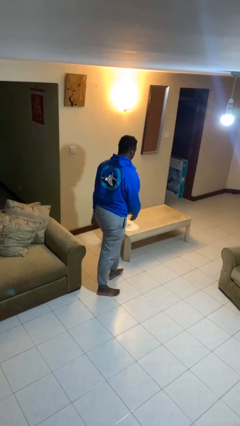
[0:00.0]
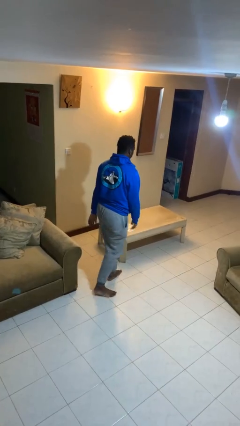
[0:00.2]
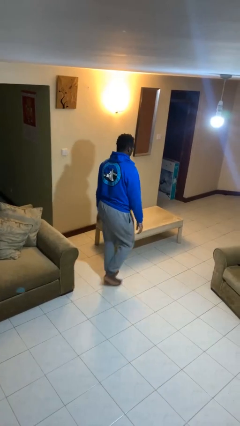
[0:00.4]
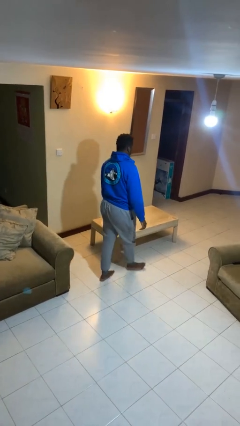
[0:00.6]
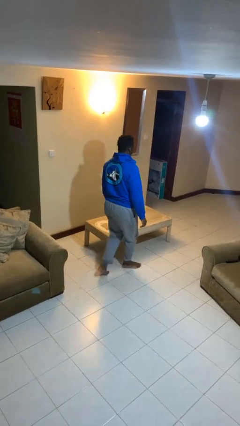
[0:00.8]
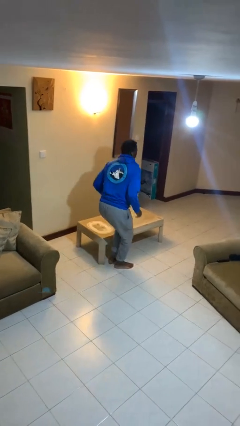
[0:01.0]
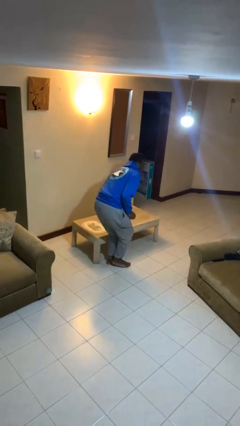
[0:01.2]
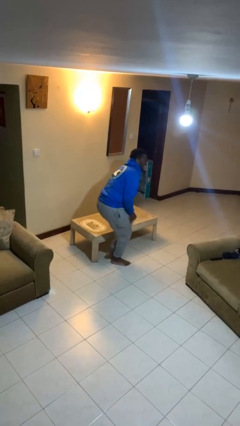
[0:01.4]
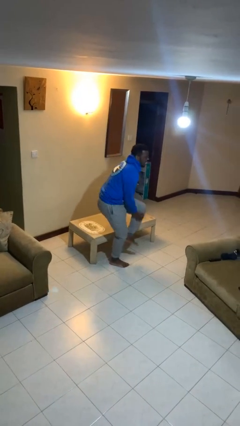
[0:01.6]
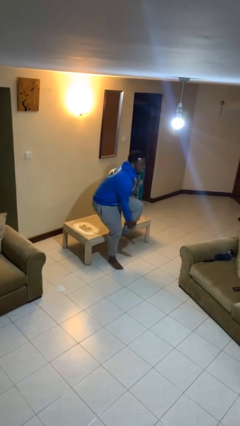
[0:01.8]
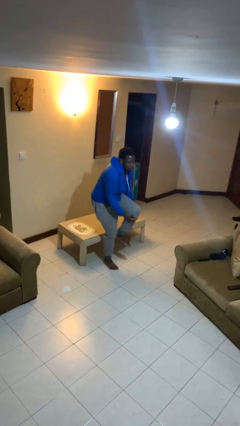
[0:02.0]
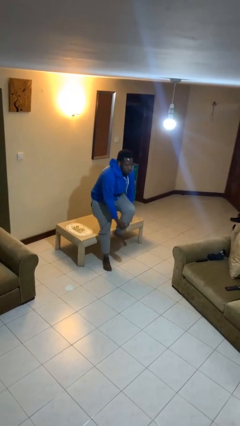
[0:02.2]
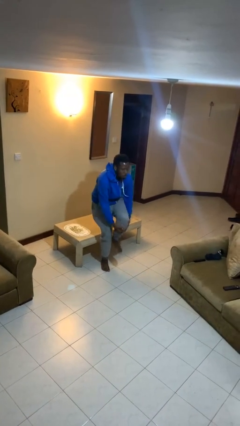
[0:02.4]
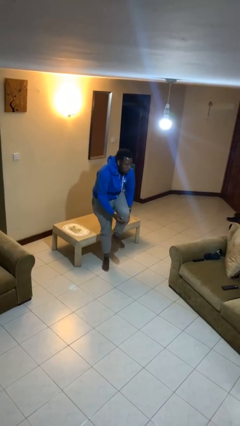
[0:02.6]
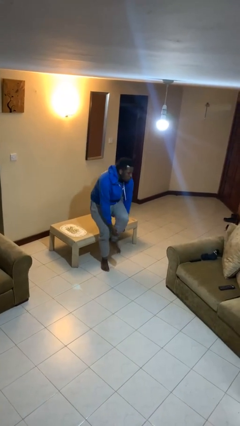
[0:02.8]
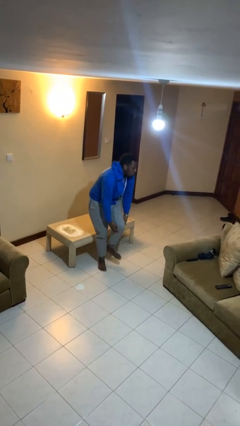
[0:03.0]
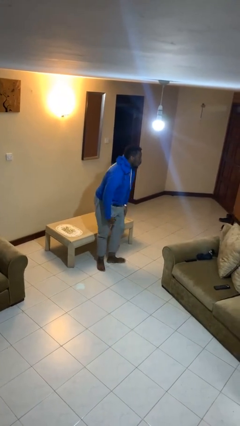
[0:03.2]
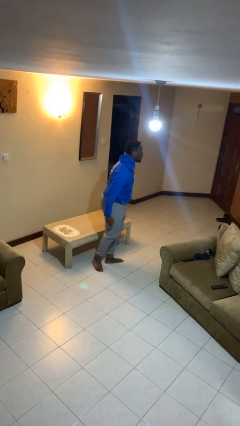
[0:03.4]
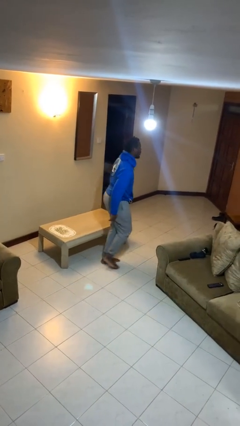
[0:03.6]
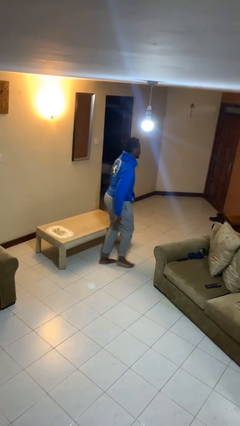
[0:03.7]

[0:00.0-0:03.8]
person bumps into table

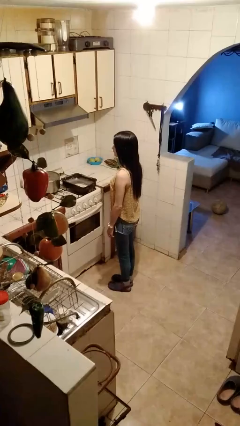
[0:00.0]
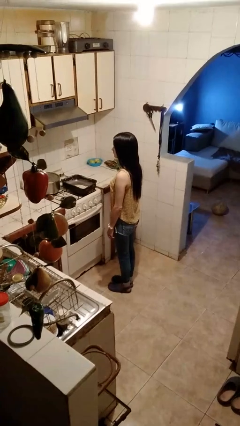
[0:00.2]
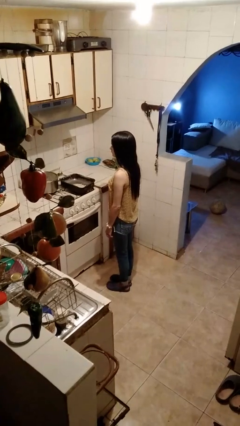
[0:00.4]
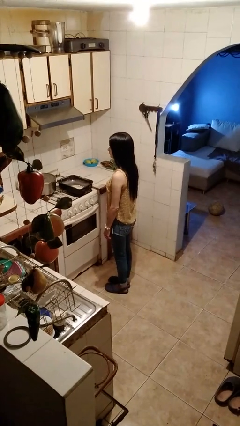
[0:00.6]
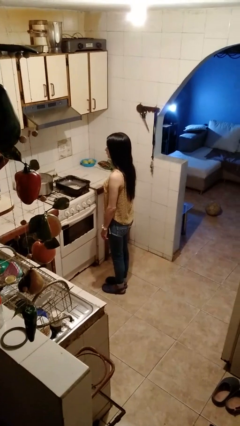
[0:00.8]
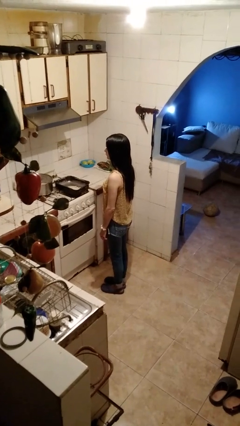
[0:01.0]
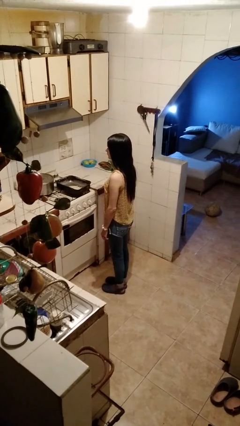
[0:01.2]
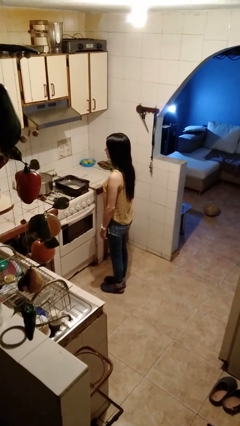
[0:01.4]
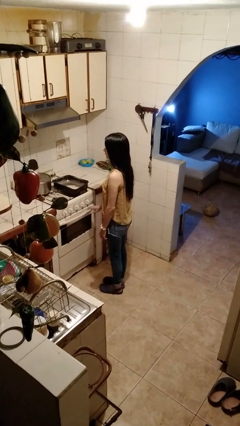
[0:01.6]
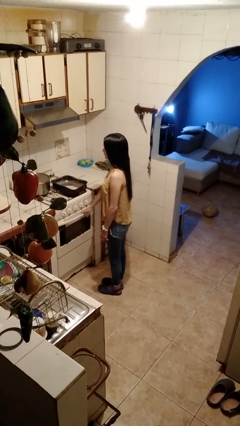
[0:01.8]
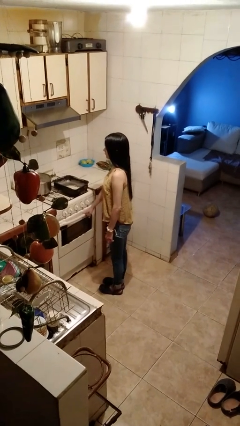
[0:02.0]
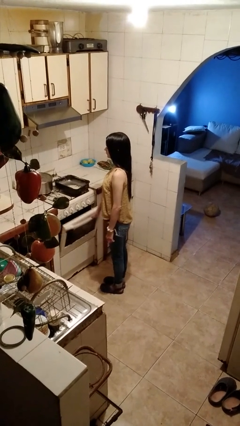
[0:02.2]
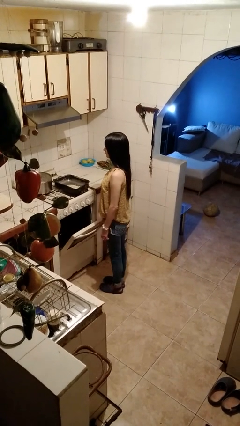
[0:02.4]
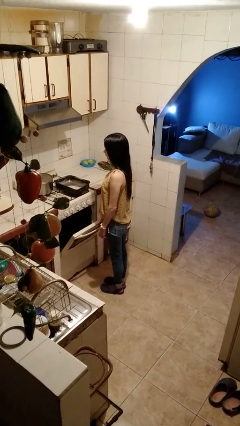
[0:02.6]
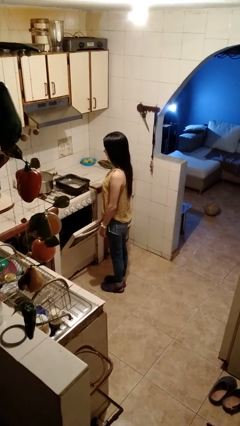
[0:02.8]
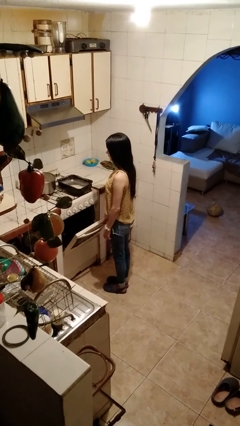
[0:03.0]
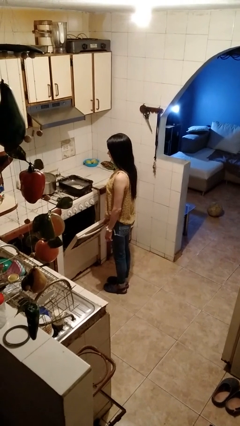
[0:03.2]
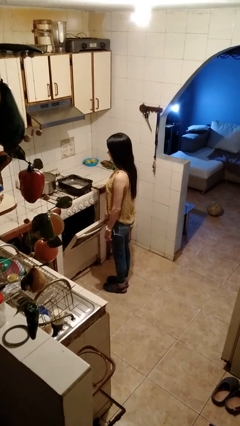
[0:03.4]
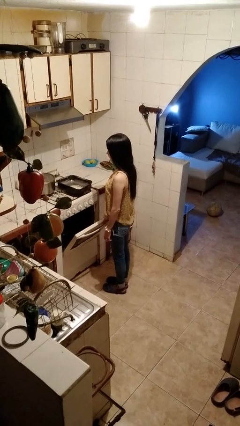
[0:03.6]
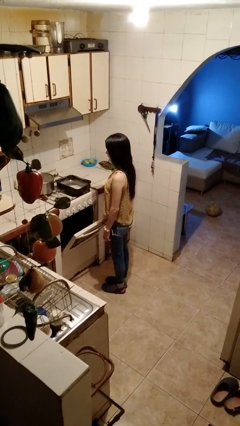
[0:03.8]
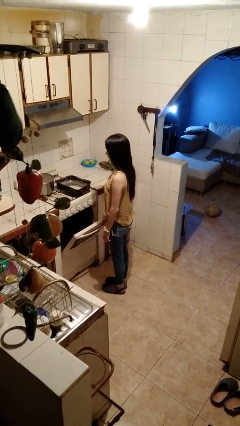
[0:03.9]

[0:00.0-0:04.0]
person opens oven door

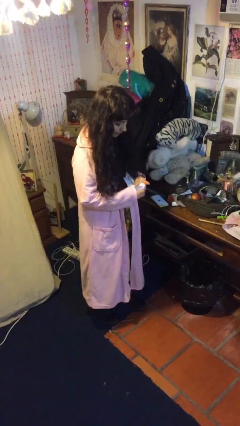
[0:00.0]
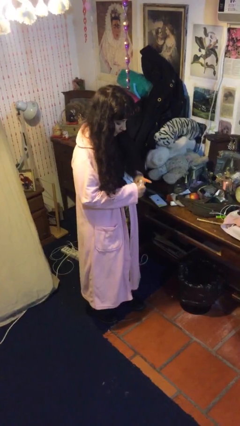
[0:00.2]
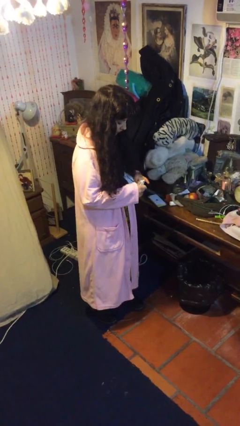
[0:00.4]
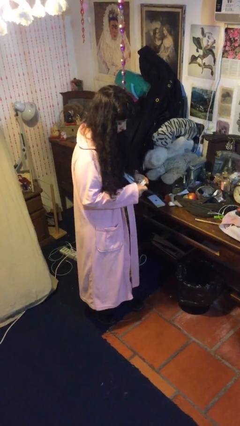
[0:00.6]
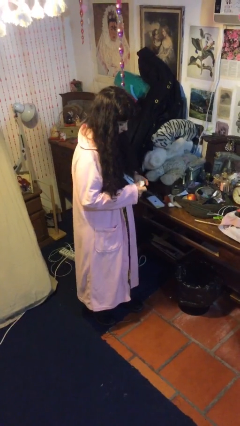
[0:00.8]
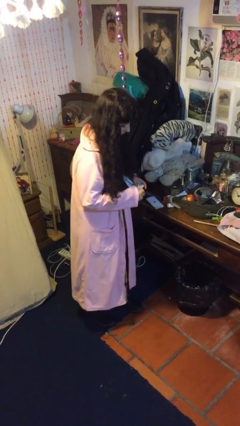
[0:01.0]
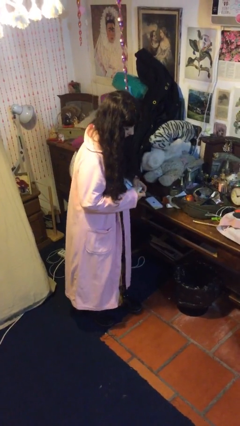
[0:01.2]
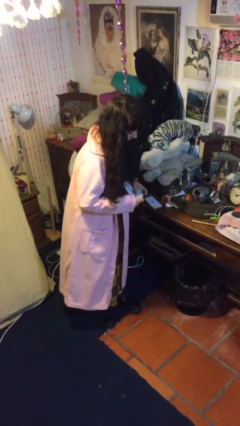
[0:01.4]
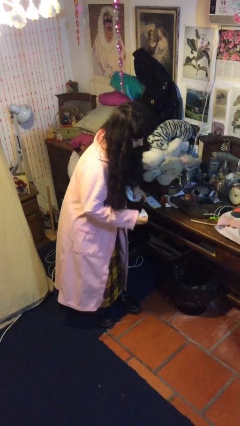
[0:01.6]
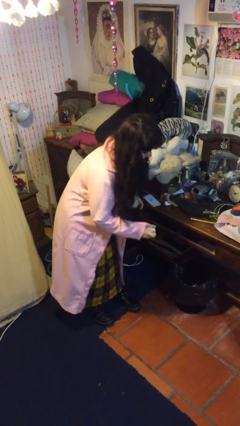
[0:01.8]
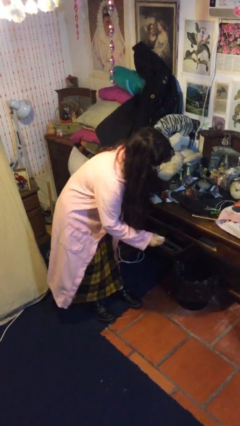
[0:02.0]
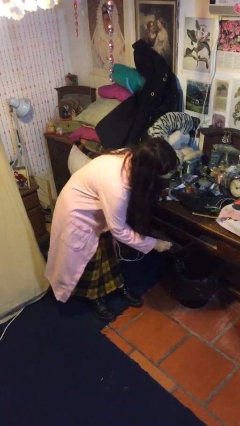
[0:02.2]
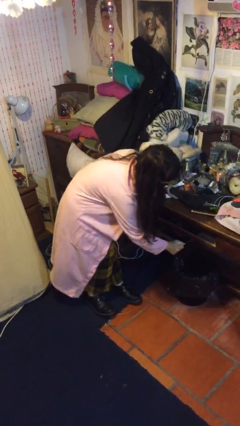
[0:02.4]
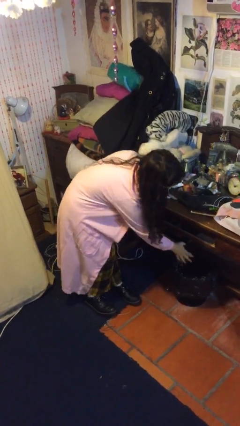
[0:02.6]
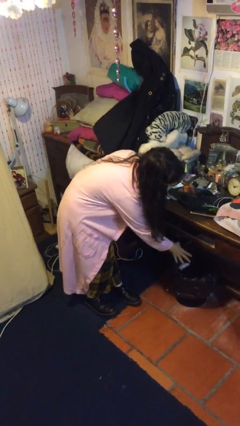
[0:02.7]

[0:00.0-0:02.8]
person discards trash

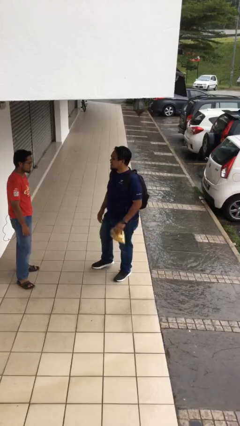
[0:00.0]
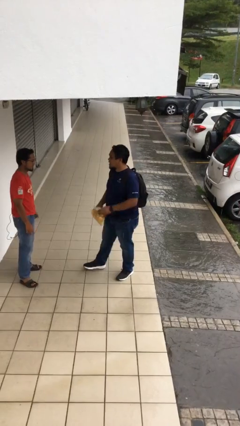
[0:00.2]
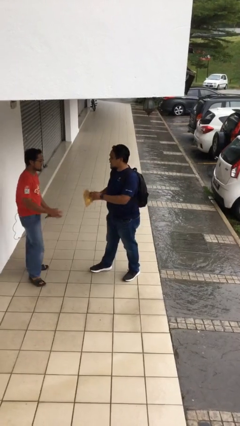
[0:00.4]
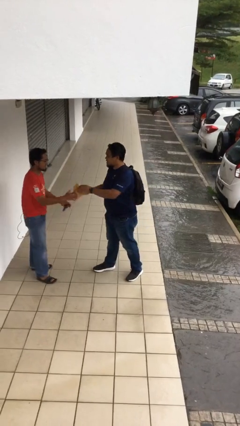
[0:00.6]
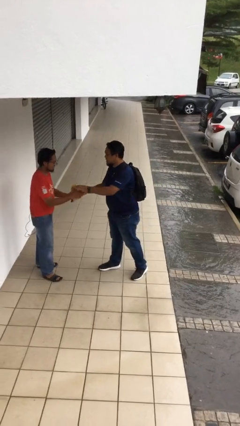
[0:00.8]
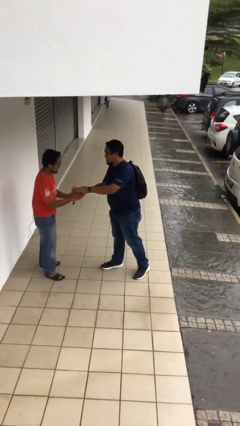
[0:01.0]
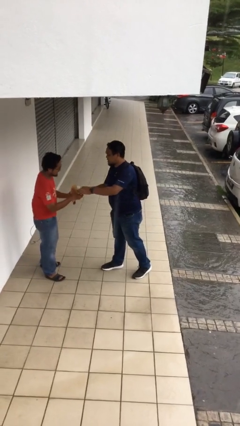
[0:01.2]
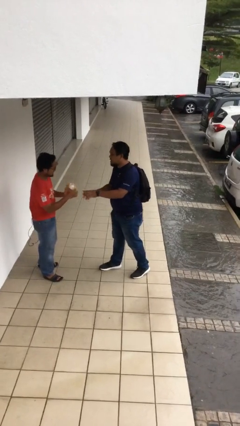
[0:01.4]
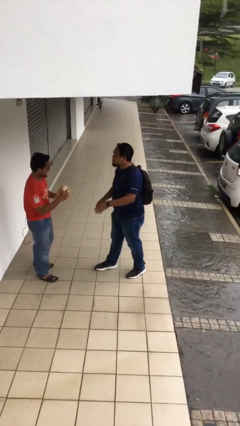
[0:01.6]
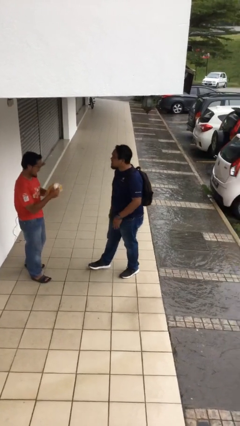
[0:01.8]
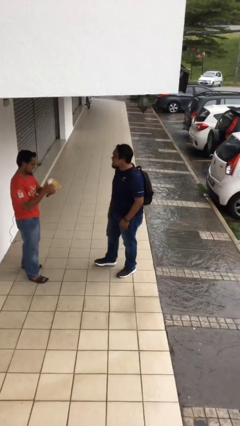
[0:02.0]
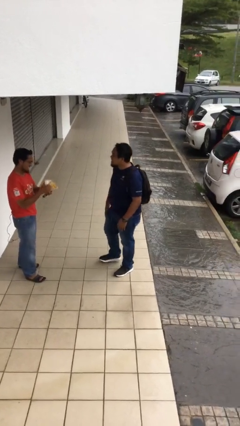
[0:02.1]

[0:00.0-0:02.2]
person transfers object to person

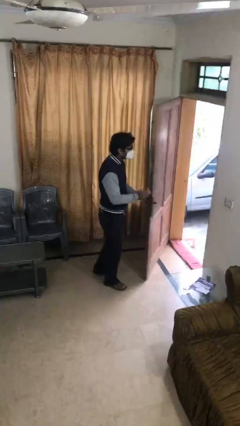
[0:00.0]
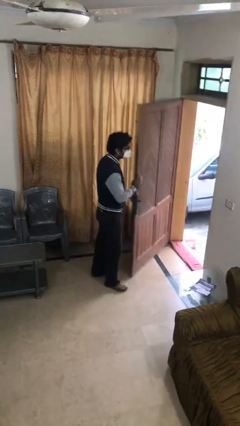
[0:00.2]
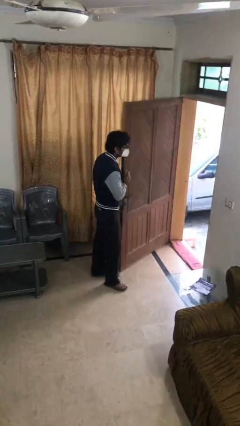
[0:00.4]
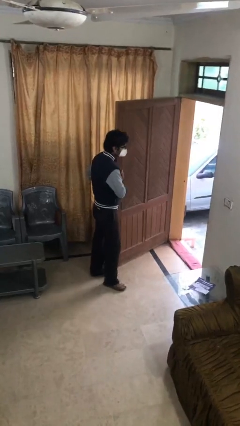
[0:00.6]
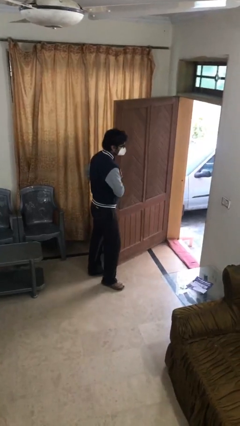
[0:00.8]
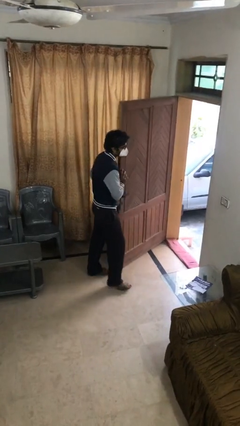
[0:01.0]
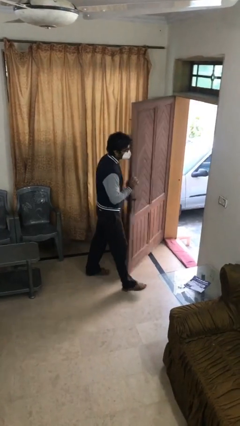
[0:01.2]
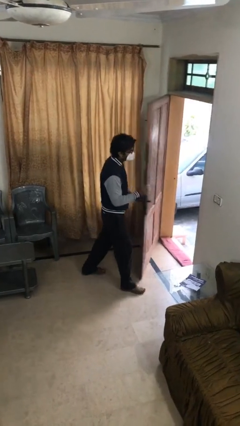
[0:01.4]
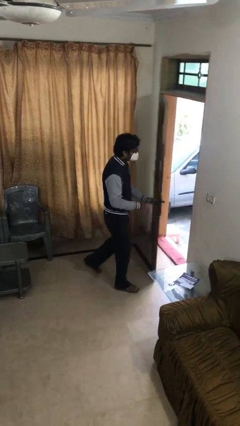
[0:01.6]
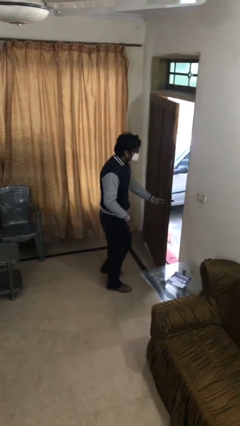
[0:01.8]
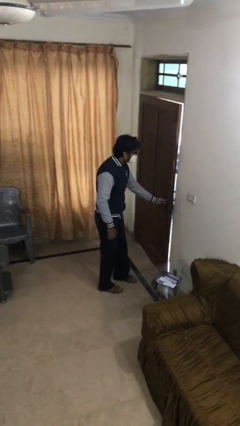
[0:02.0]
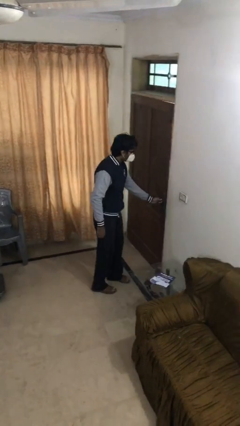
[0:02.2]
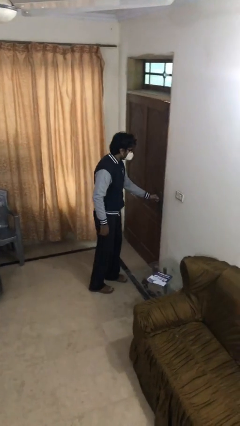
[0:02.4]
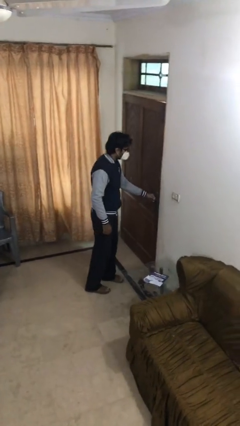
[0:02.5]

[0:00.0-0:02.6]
person closes facility door

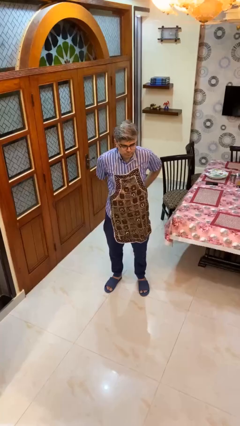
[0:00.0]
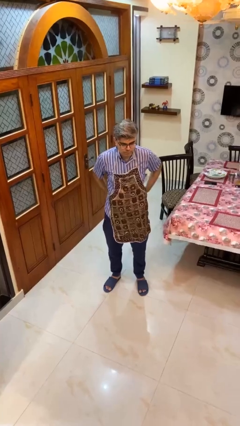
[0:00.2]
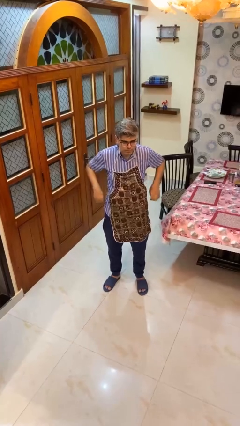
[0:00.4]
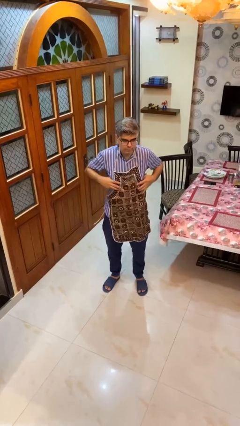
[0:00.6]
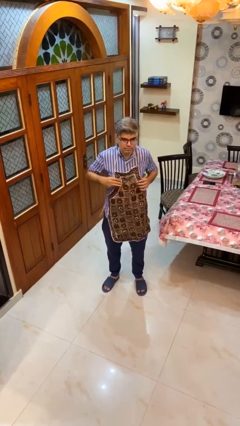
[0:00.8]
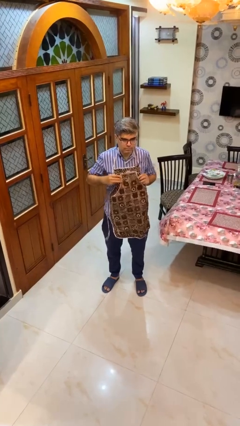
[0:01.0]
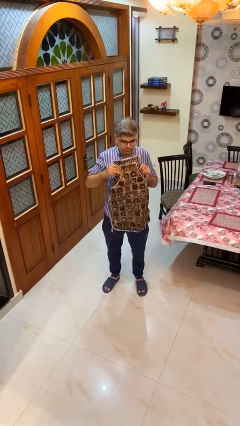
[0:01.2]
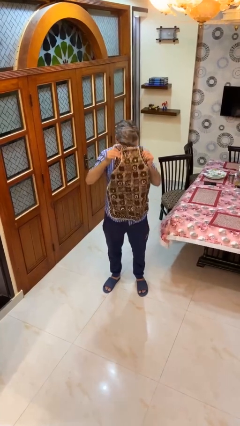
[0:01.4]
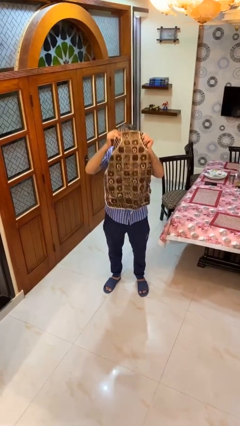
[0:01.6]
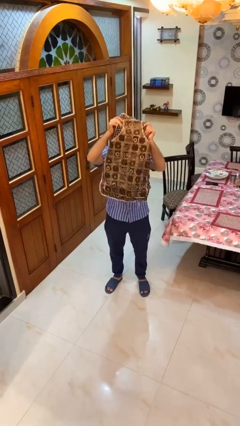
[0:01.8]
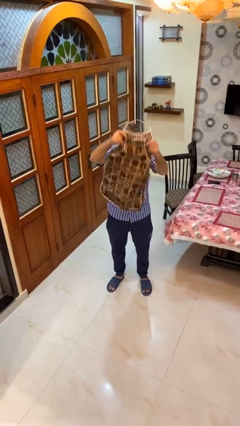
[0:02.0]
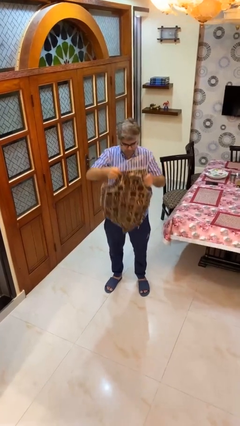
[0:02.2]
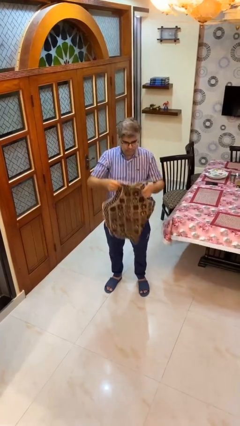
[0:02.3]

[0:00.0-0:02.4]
person takes off apron

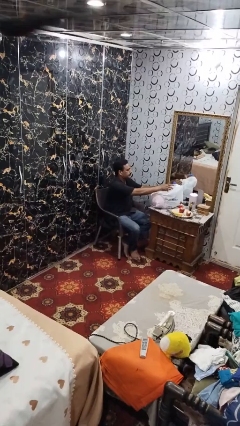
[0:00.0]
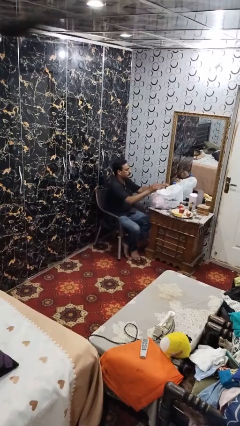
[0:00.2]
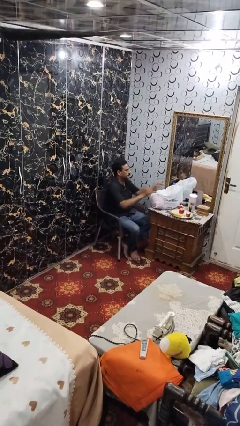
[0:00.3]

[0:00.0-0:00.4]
person puts object into bag
